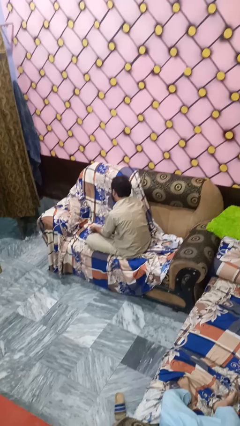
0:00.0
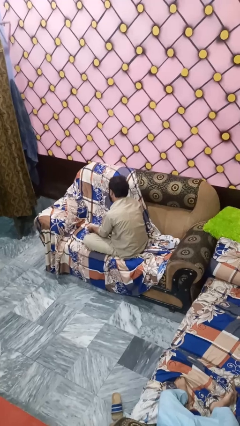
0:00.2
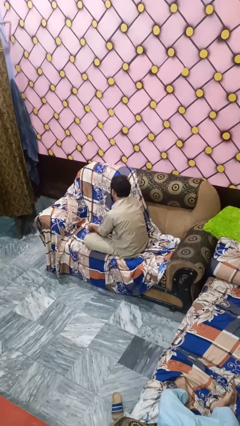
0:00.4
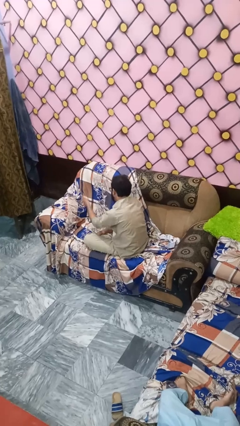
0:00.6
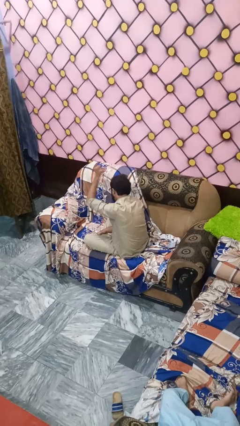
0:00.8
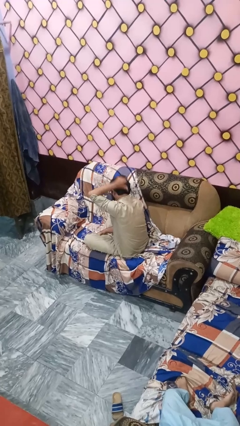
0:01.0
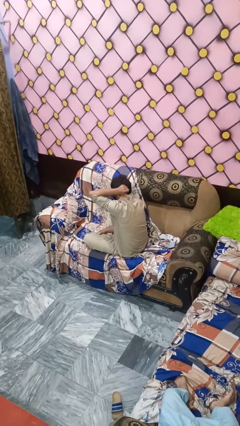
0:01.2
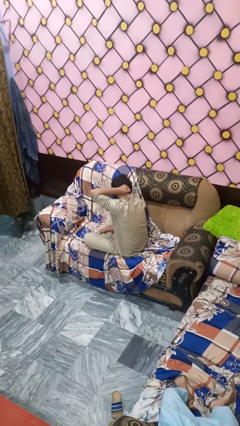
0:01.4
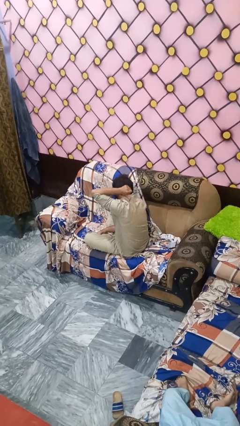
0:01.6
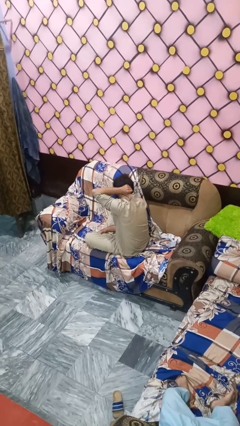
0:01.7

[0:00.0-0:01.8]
person gestures behind me

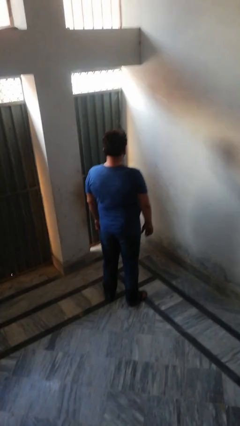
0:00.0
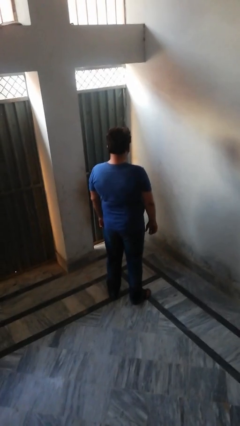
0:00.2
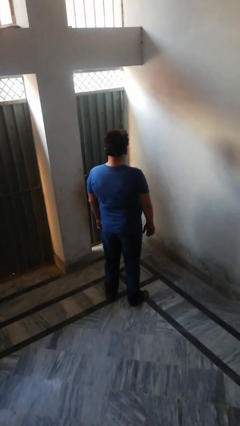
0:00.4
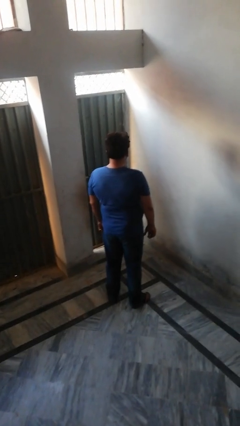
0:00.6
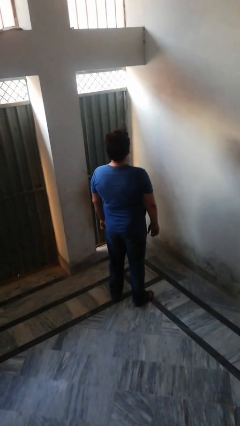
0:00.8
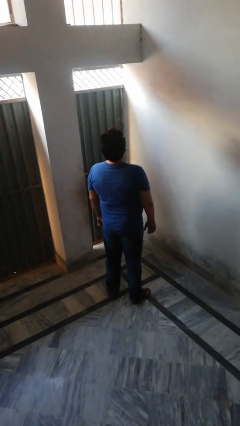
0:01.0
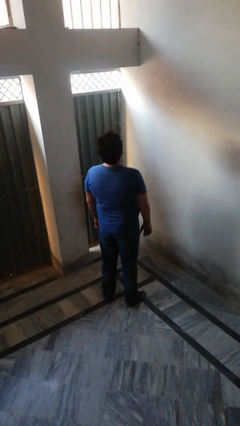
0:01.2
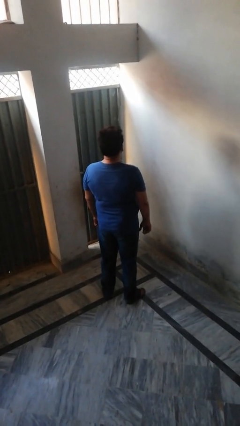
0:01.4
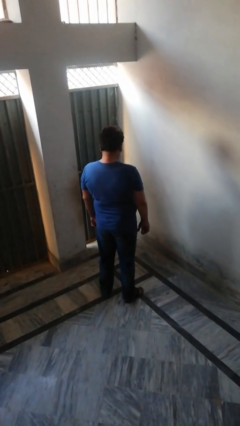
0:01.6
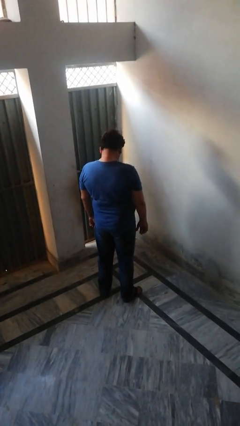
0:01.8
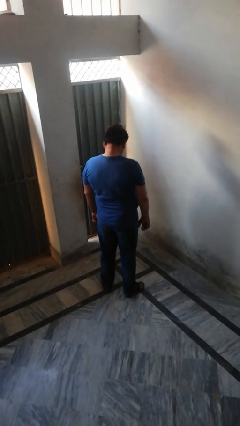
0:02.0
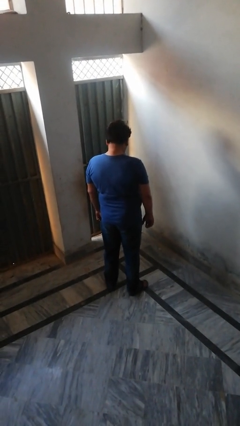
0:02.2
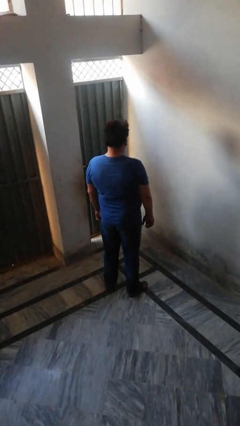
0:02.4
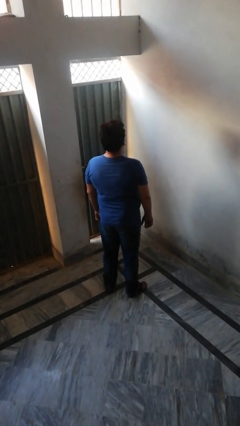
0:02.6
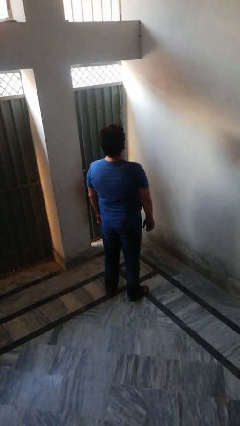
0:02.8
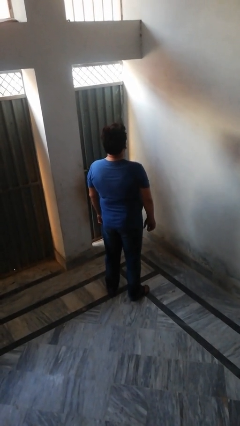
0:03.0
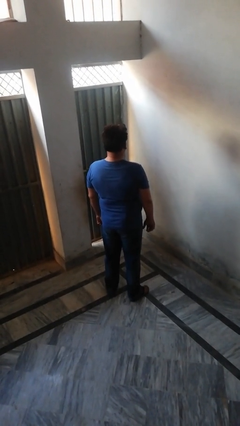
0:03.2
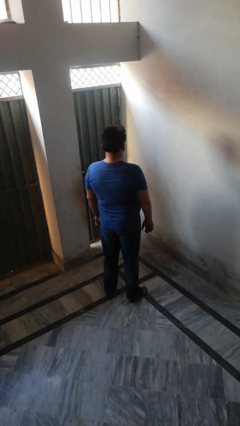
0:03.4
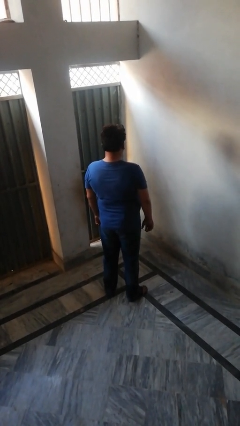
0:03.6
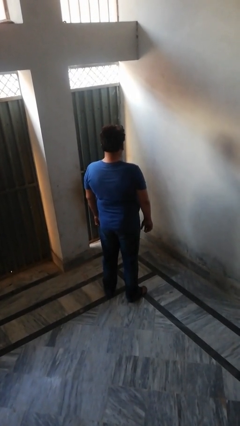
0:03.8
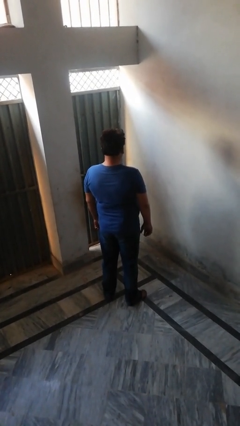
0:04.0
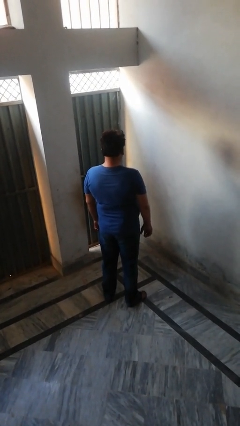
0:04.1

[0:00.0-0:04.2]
person nods head

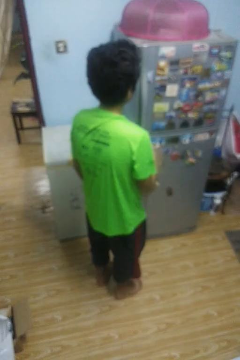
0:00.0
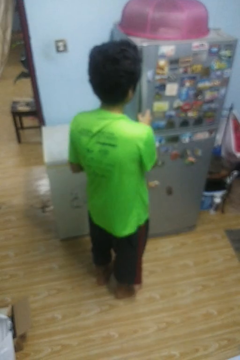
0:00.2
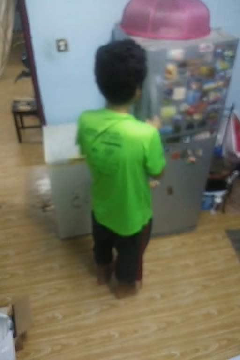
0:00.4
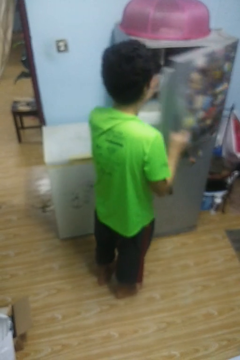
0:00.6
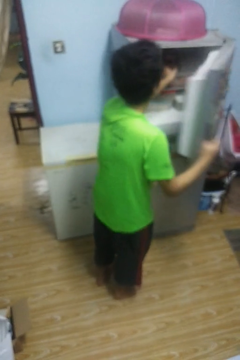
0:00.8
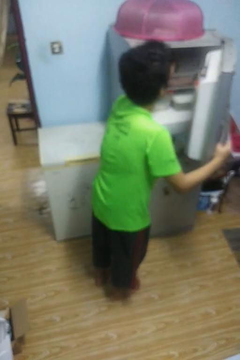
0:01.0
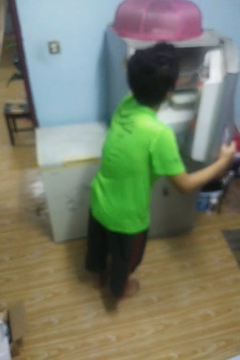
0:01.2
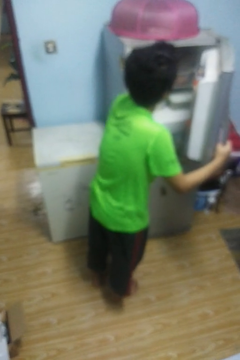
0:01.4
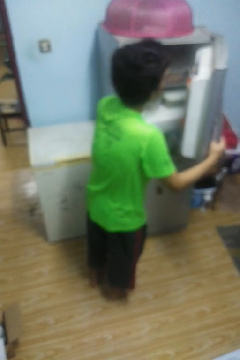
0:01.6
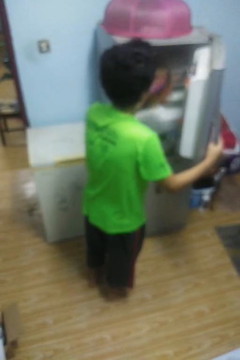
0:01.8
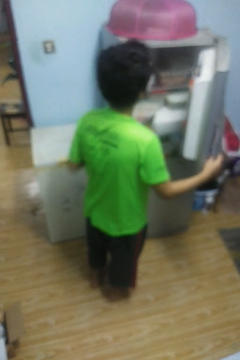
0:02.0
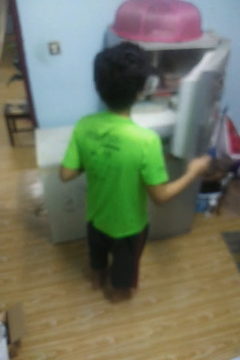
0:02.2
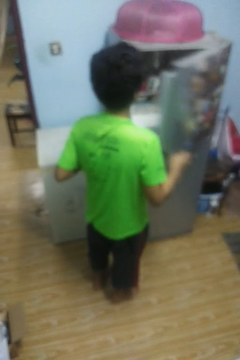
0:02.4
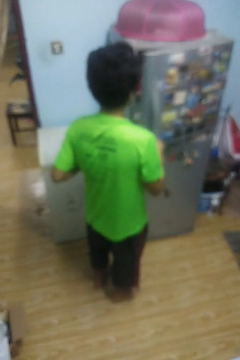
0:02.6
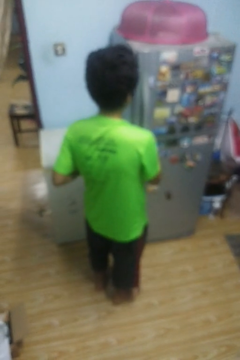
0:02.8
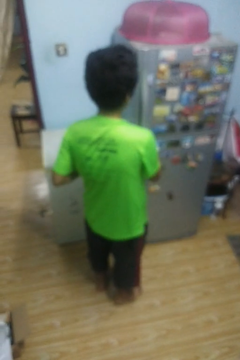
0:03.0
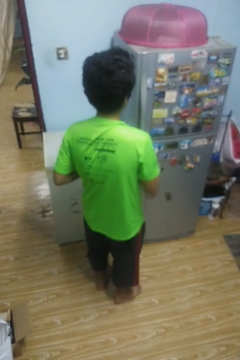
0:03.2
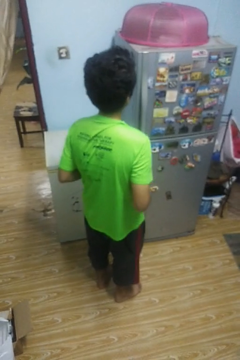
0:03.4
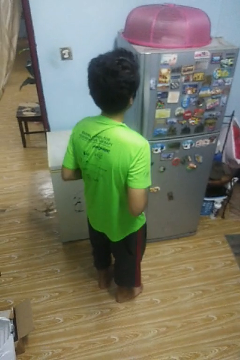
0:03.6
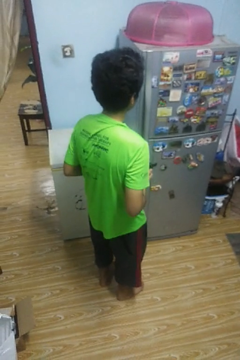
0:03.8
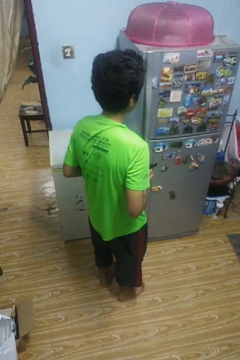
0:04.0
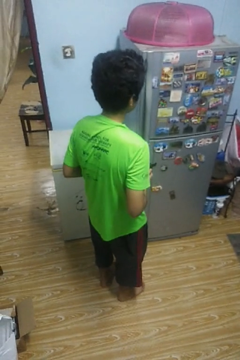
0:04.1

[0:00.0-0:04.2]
person takes object from refrigerator

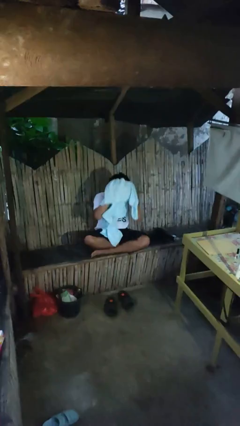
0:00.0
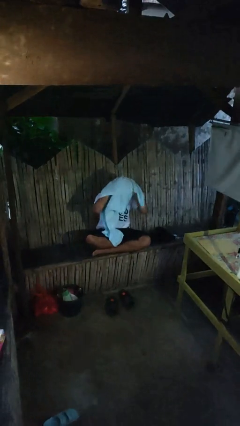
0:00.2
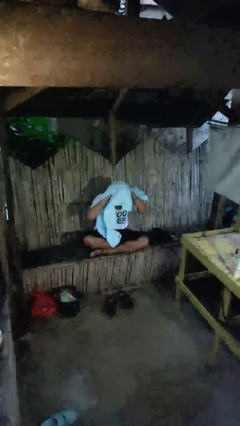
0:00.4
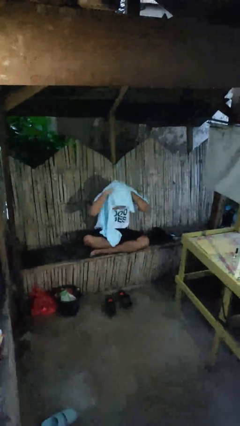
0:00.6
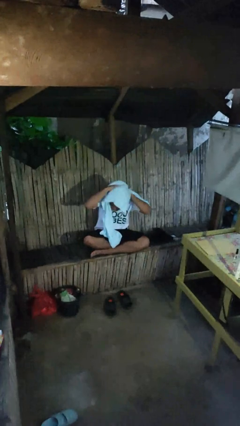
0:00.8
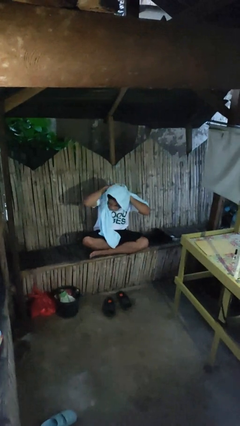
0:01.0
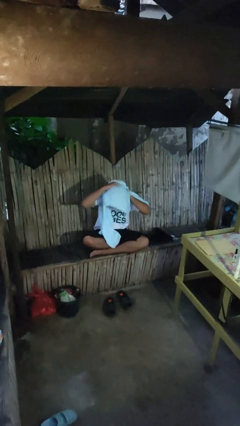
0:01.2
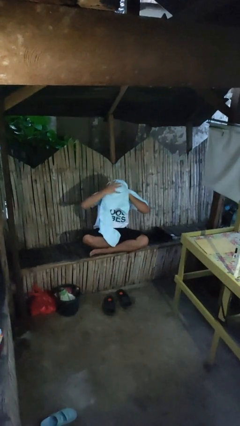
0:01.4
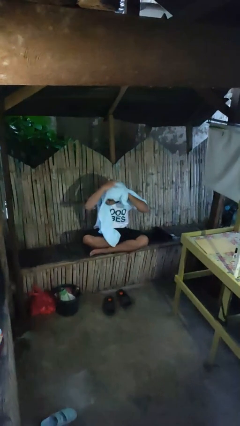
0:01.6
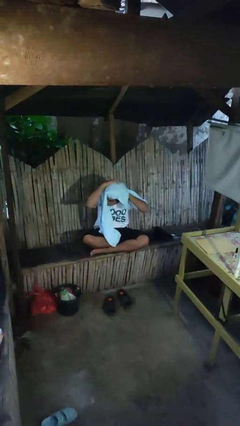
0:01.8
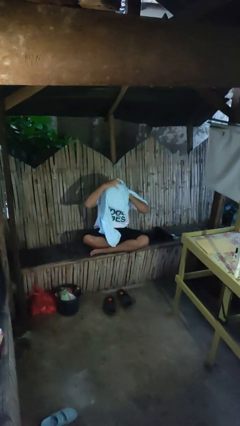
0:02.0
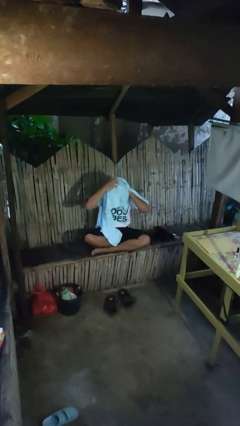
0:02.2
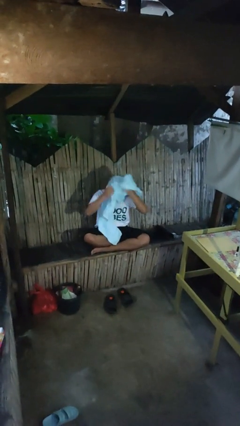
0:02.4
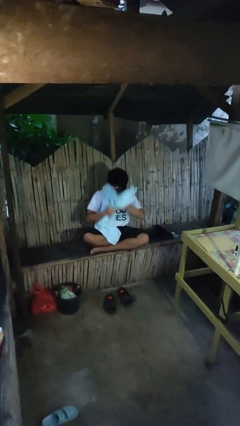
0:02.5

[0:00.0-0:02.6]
person dries hair with towel

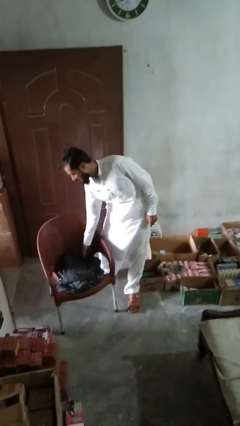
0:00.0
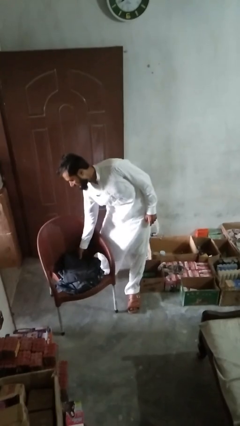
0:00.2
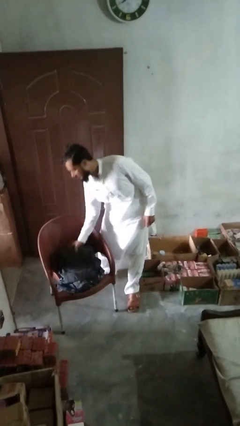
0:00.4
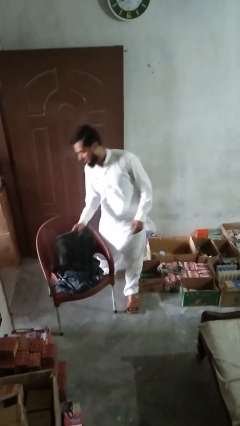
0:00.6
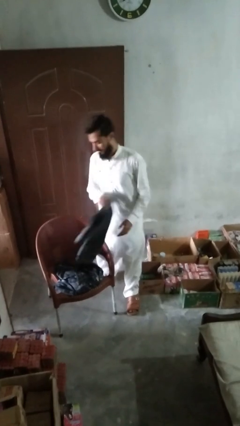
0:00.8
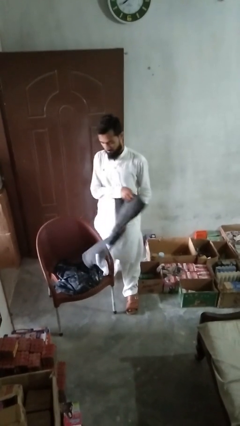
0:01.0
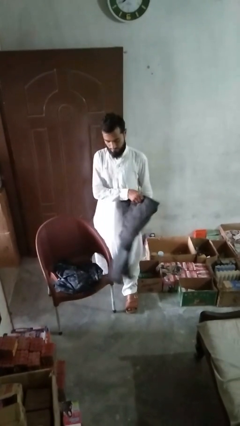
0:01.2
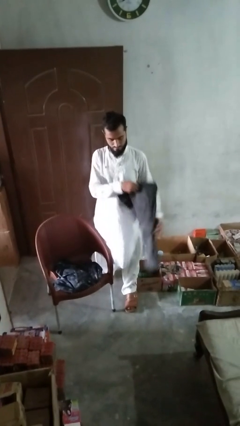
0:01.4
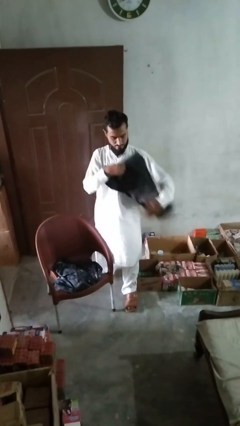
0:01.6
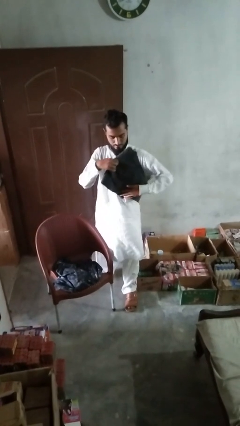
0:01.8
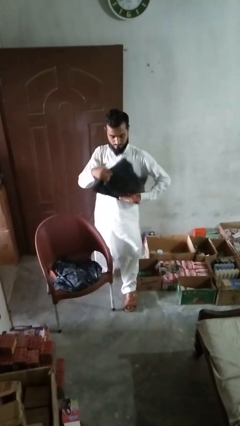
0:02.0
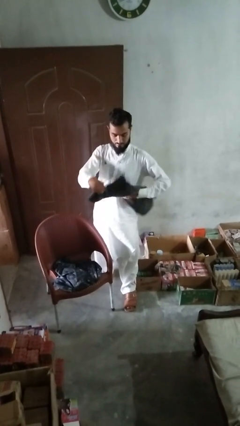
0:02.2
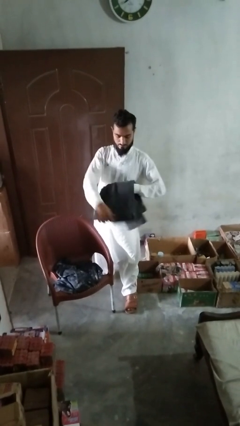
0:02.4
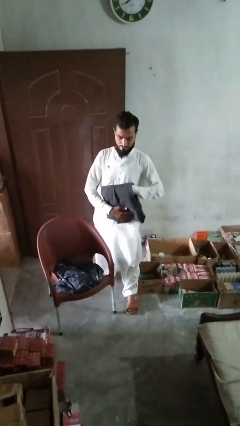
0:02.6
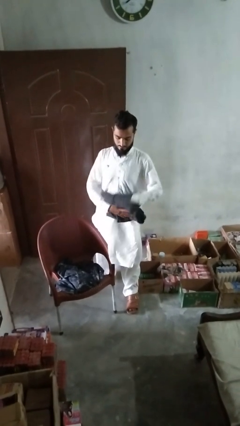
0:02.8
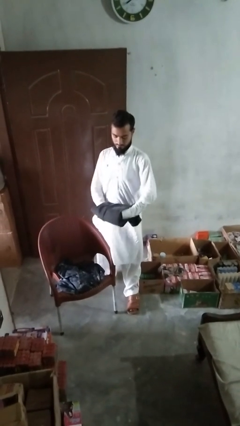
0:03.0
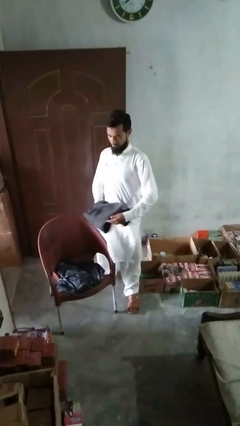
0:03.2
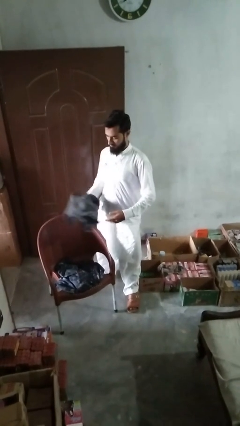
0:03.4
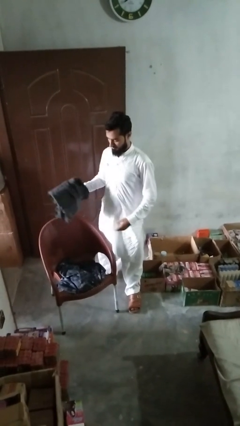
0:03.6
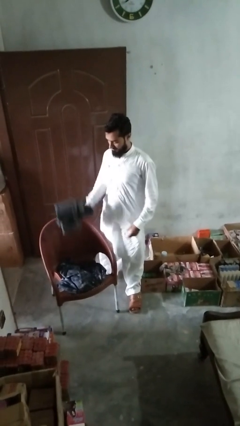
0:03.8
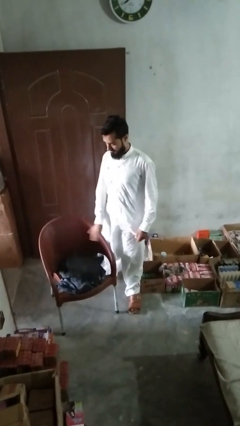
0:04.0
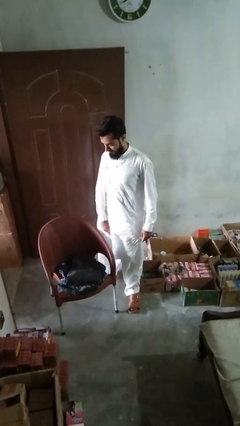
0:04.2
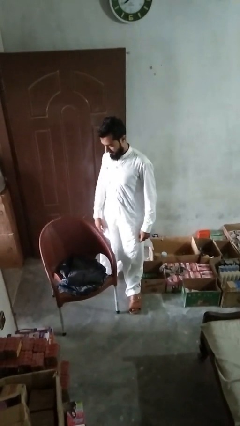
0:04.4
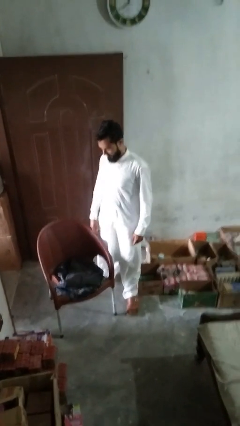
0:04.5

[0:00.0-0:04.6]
person folds pants

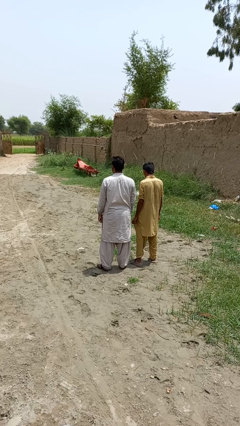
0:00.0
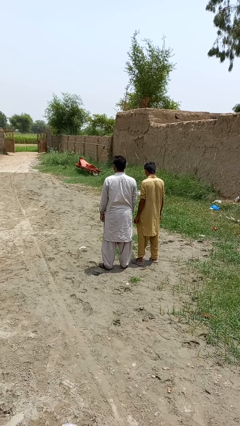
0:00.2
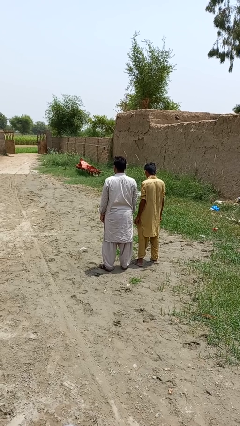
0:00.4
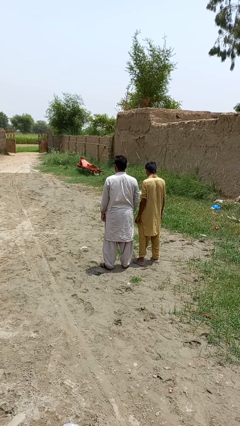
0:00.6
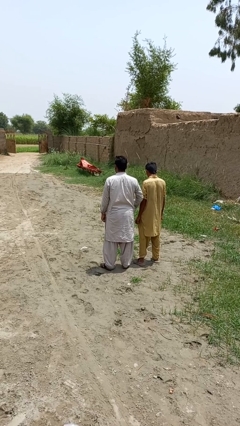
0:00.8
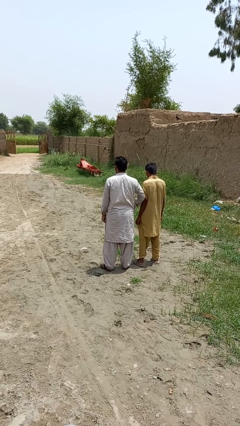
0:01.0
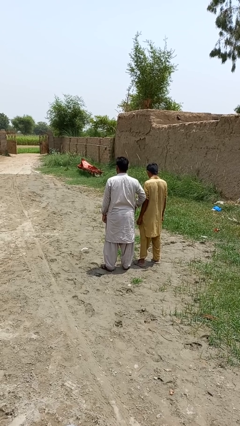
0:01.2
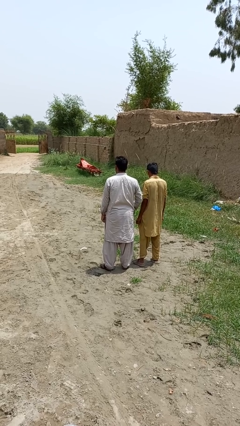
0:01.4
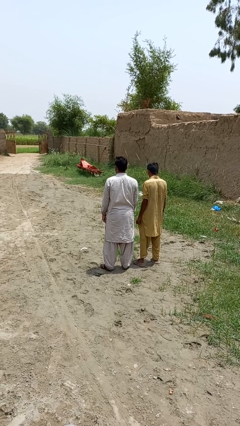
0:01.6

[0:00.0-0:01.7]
person nudges person with elbow
